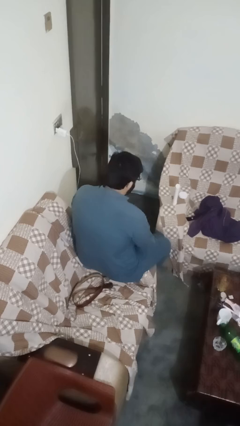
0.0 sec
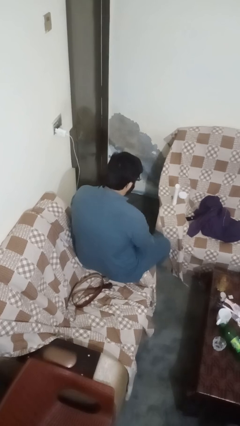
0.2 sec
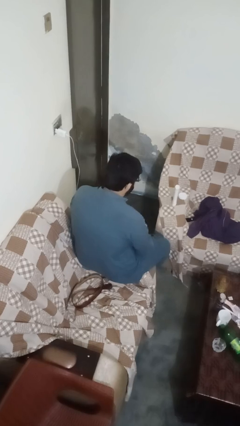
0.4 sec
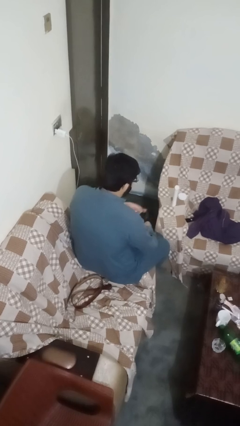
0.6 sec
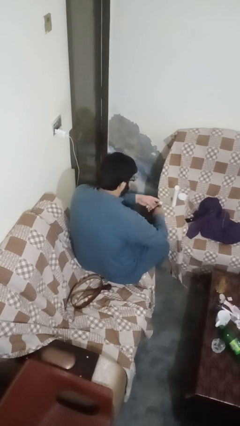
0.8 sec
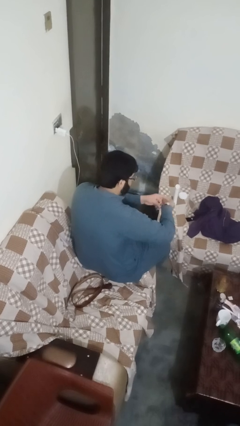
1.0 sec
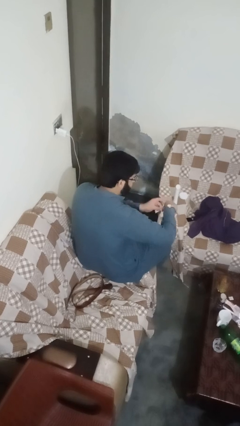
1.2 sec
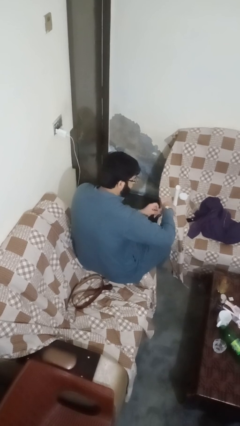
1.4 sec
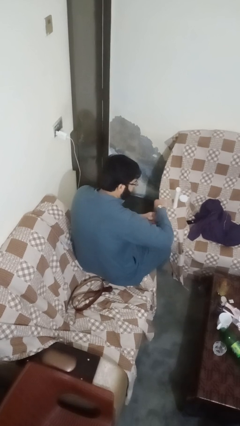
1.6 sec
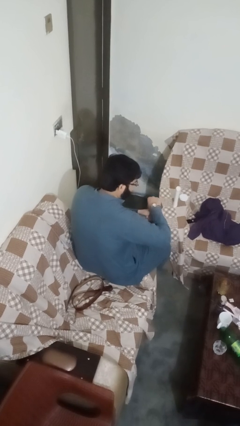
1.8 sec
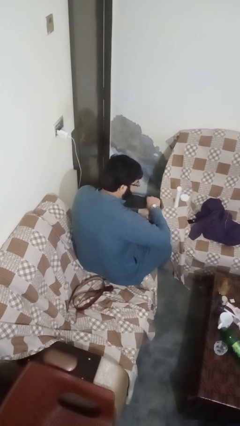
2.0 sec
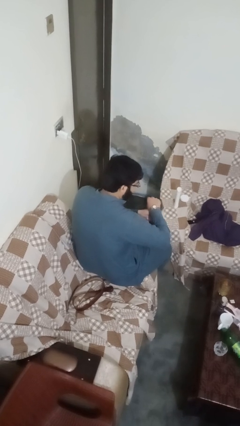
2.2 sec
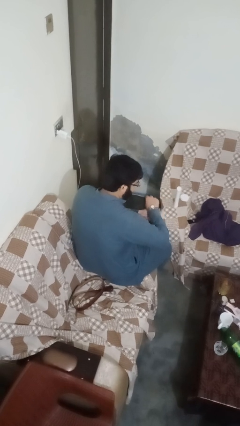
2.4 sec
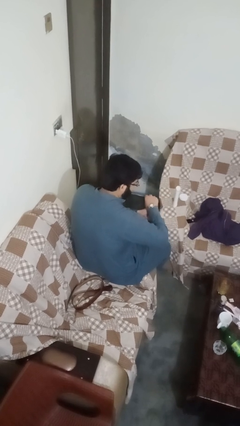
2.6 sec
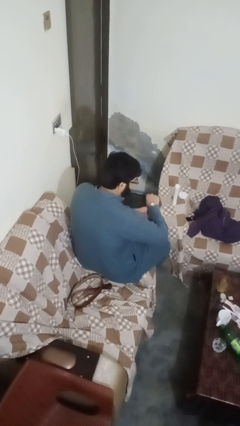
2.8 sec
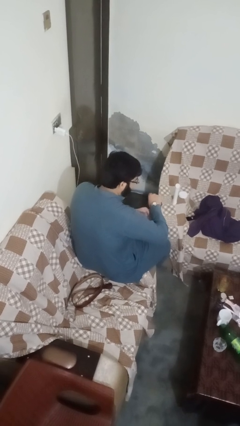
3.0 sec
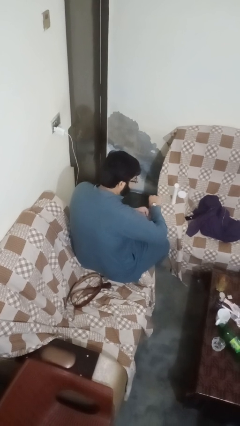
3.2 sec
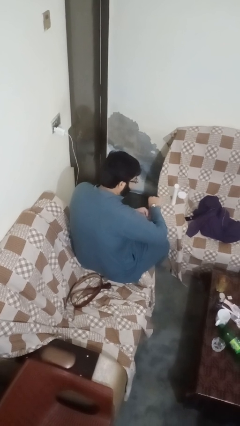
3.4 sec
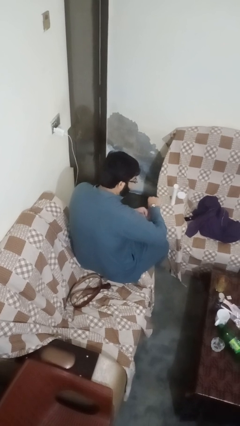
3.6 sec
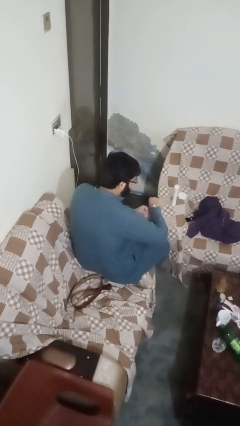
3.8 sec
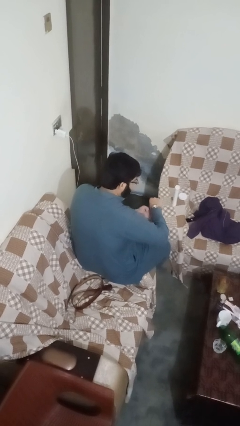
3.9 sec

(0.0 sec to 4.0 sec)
person puts on wristwatch

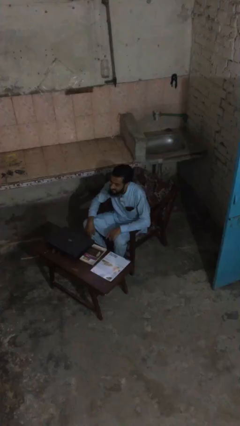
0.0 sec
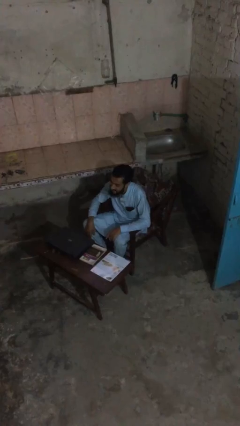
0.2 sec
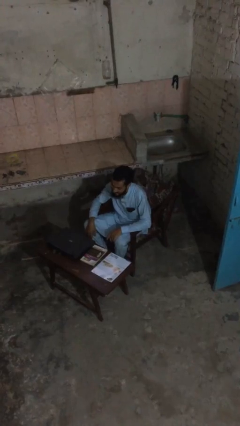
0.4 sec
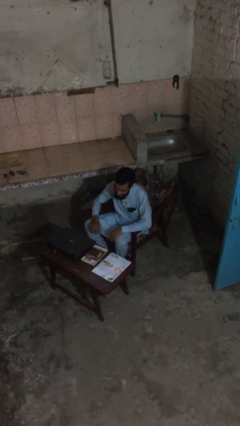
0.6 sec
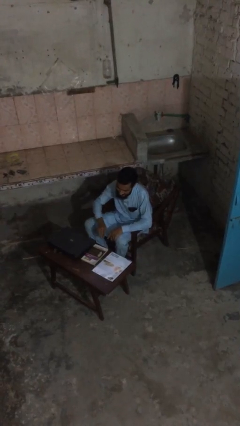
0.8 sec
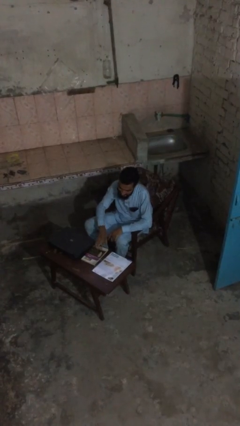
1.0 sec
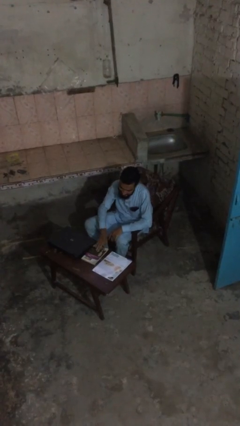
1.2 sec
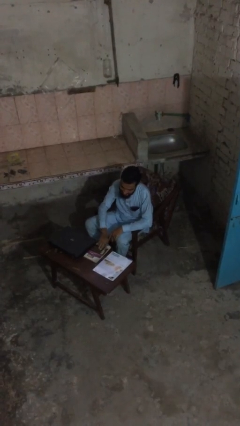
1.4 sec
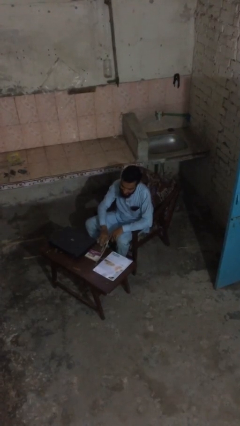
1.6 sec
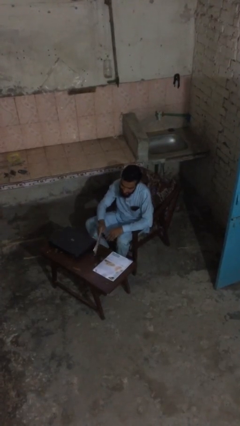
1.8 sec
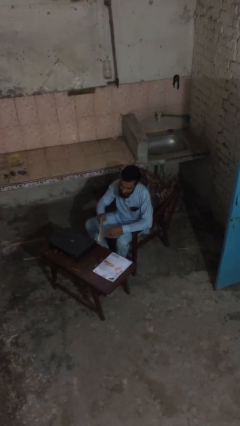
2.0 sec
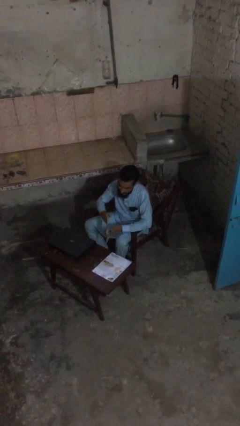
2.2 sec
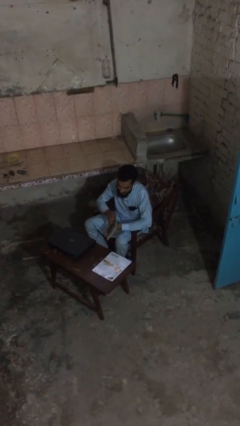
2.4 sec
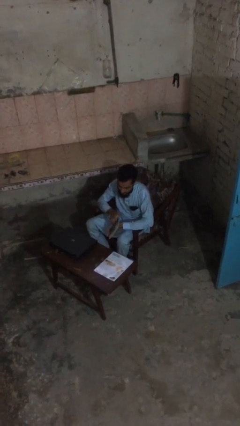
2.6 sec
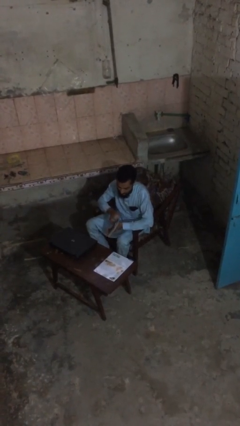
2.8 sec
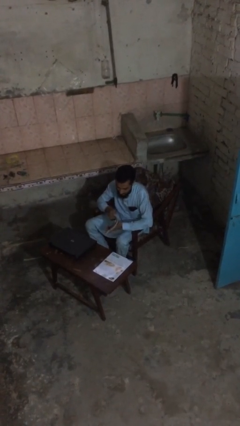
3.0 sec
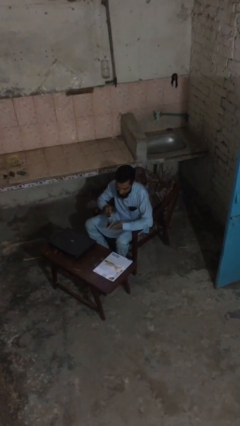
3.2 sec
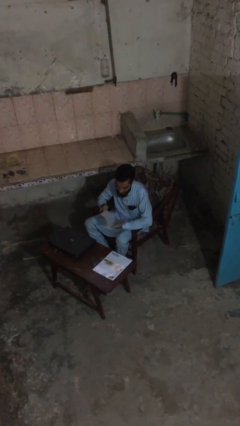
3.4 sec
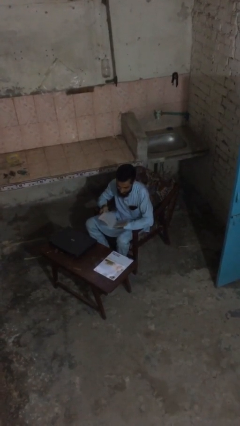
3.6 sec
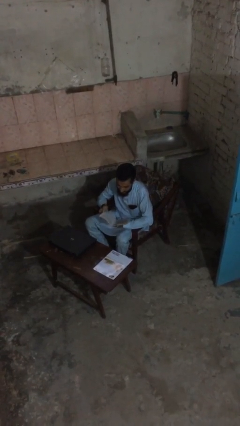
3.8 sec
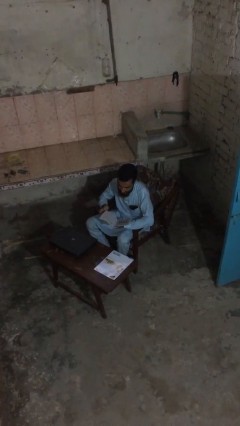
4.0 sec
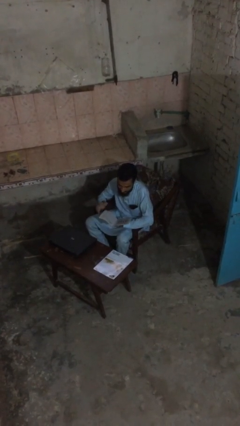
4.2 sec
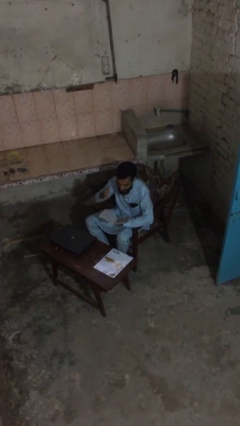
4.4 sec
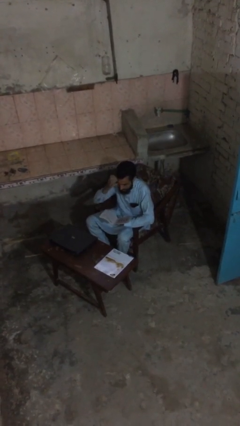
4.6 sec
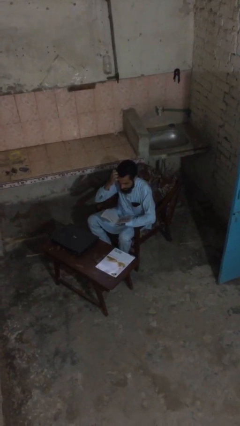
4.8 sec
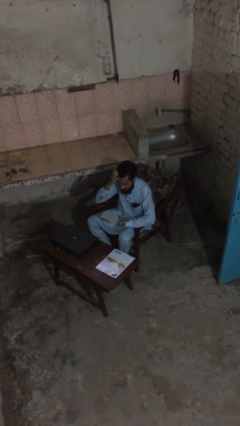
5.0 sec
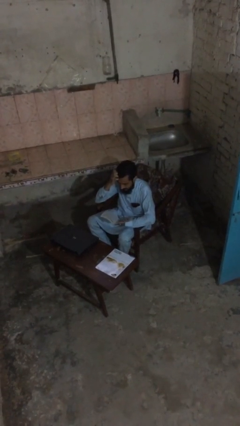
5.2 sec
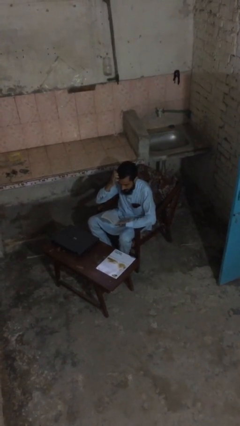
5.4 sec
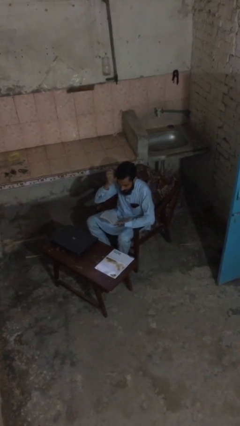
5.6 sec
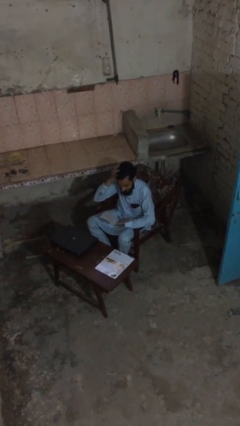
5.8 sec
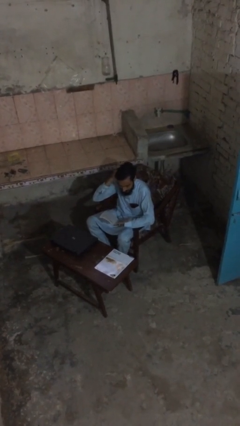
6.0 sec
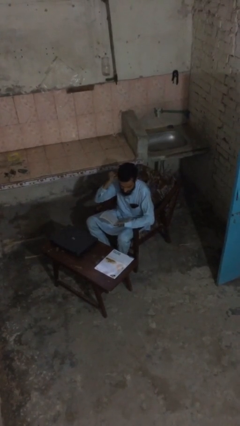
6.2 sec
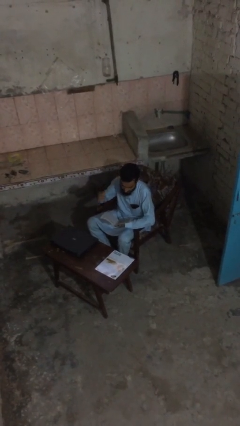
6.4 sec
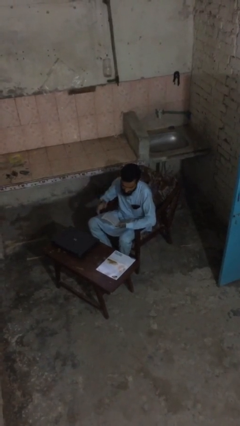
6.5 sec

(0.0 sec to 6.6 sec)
person reads document

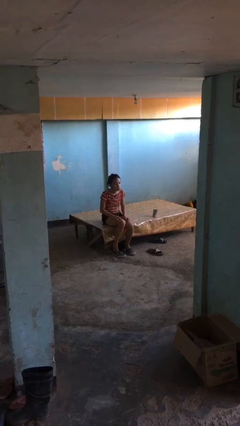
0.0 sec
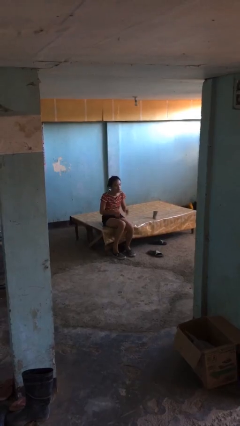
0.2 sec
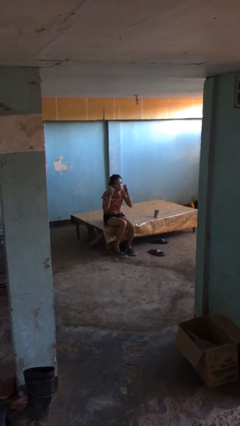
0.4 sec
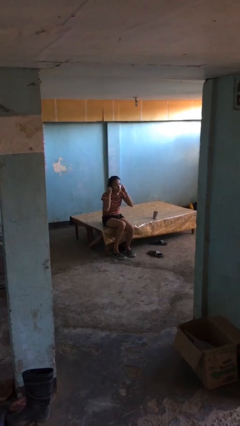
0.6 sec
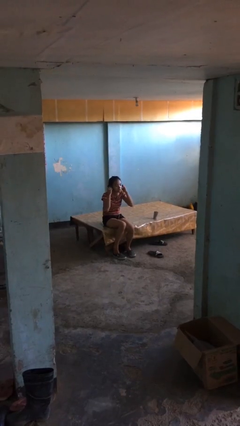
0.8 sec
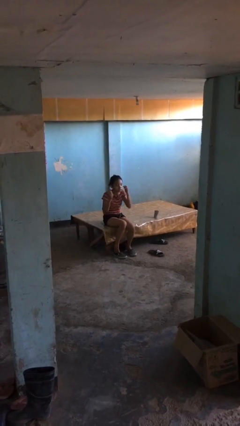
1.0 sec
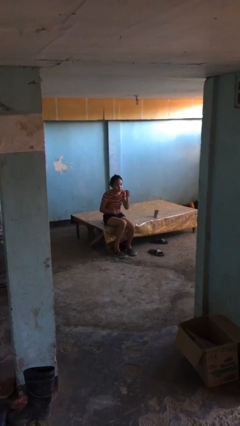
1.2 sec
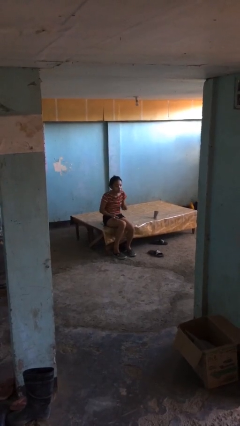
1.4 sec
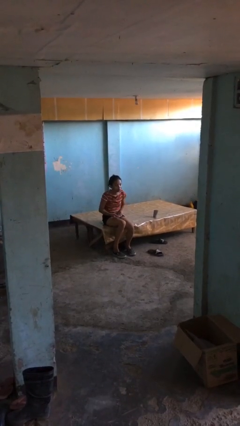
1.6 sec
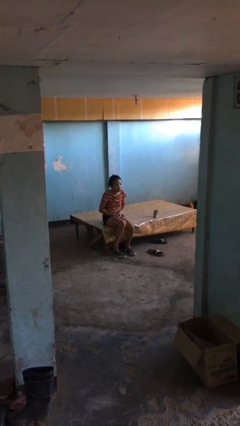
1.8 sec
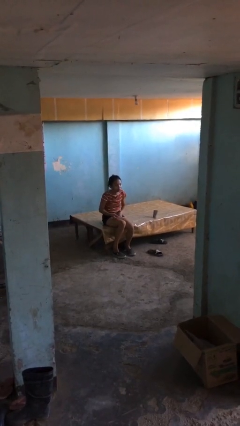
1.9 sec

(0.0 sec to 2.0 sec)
person takes off headphones

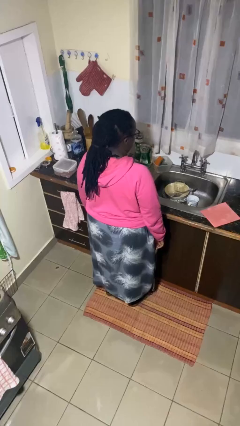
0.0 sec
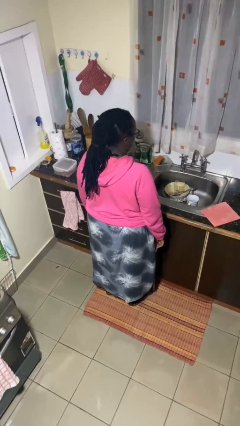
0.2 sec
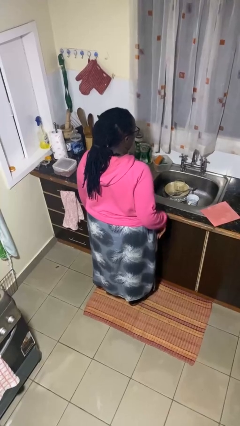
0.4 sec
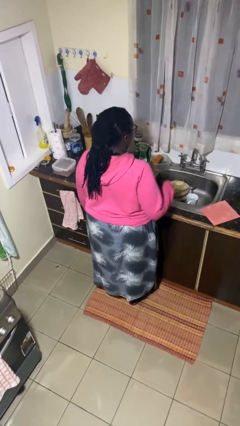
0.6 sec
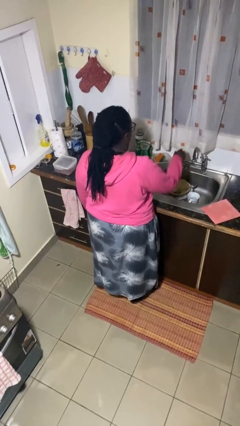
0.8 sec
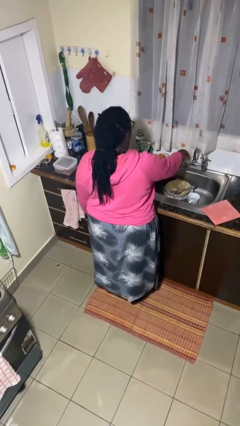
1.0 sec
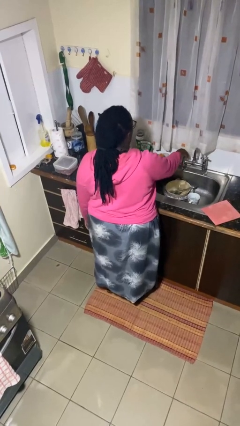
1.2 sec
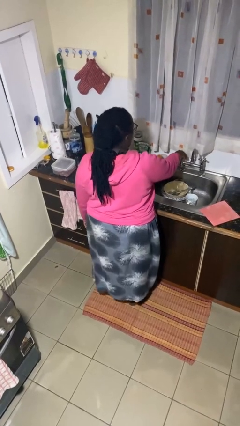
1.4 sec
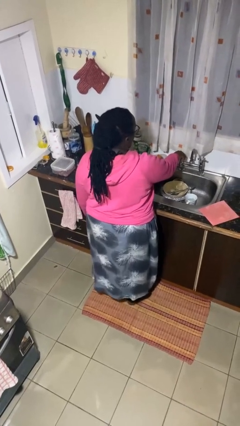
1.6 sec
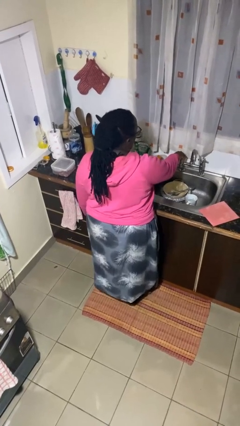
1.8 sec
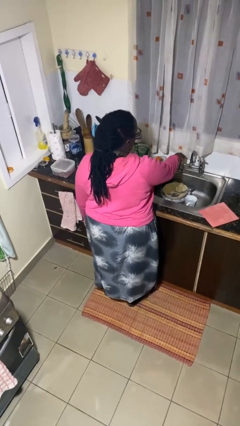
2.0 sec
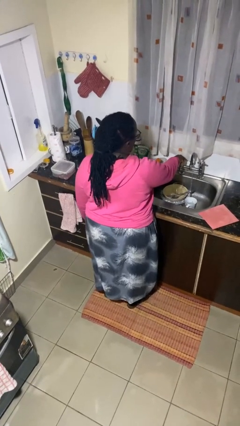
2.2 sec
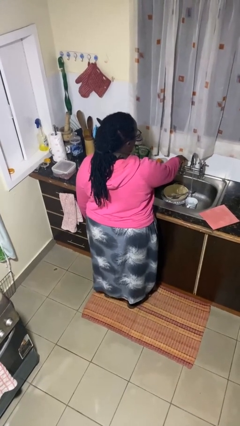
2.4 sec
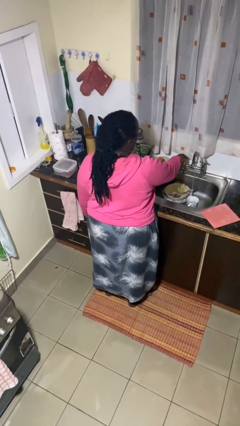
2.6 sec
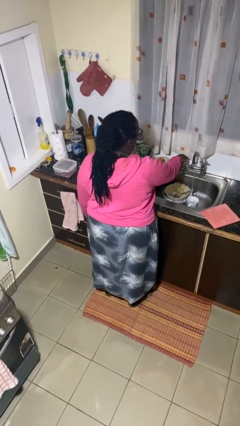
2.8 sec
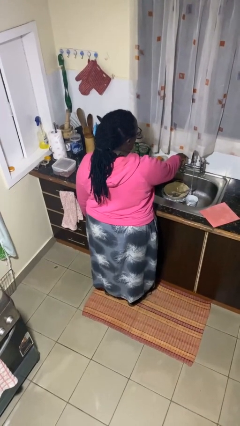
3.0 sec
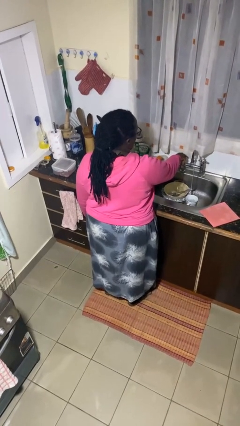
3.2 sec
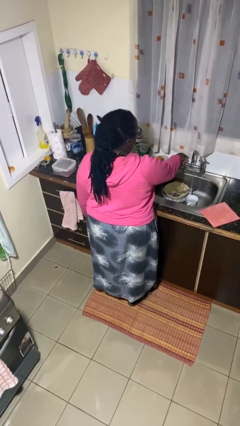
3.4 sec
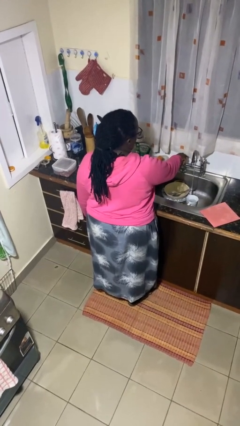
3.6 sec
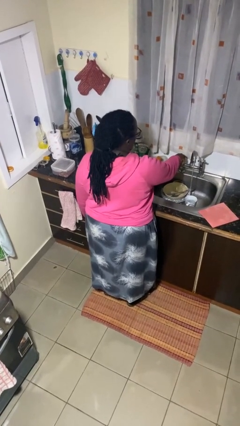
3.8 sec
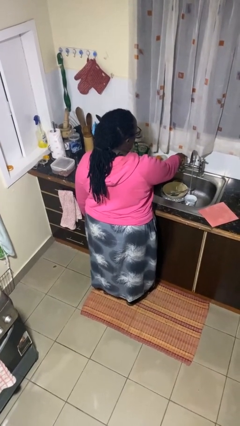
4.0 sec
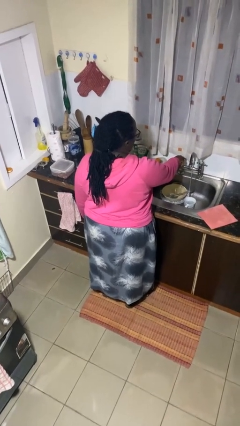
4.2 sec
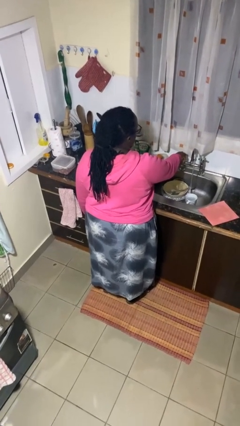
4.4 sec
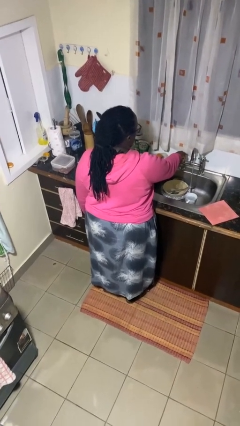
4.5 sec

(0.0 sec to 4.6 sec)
person turns on faucet

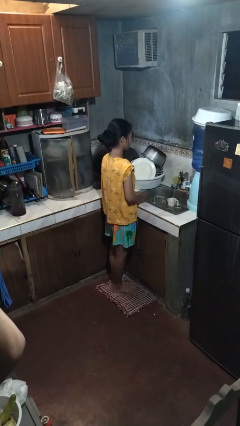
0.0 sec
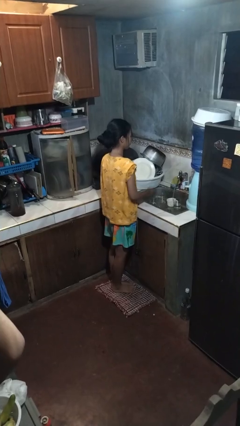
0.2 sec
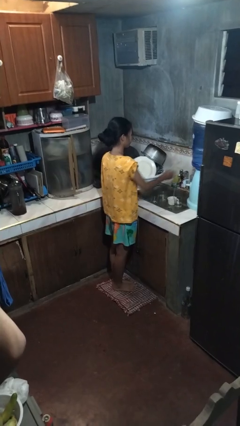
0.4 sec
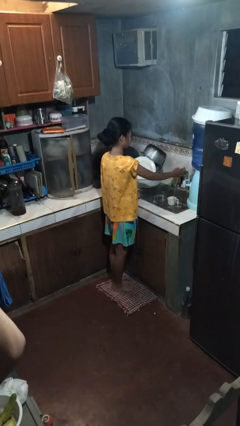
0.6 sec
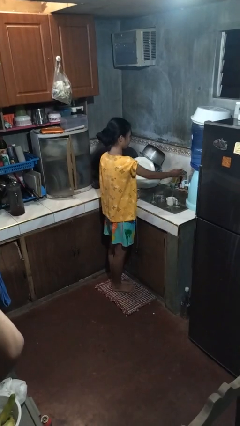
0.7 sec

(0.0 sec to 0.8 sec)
person turns off faucet
